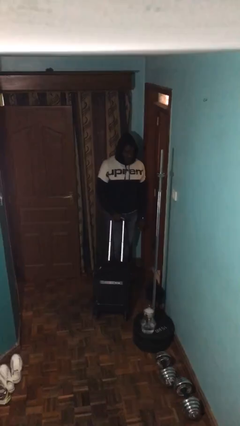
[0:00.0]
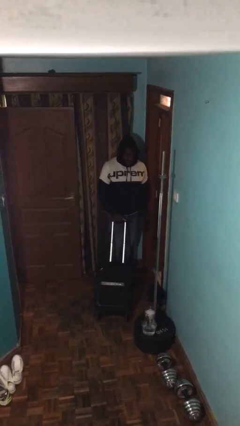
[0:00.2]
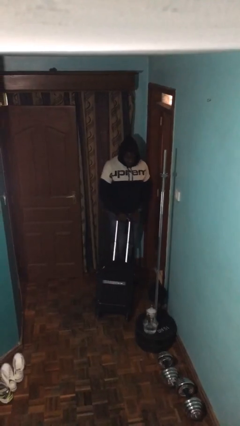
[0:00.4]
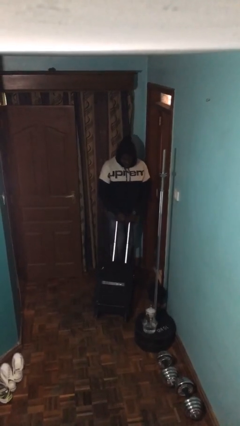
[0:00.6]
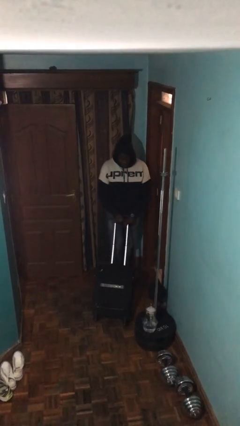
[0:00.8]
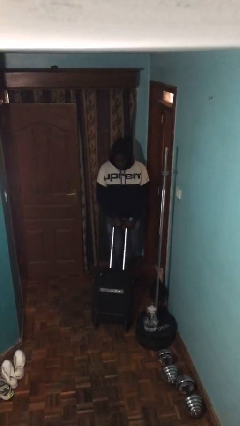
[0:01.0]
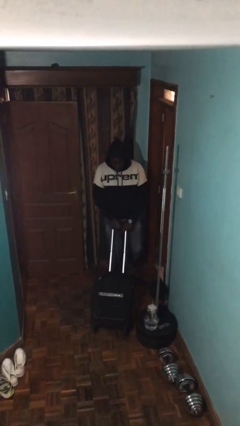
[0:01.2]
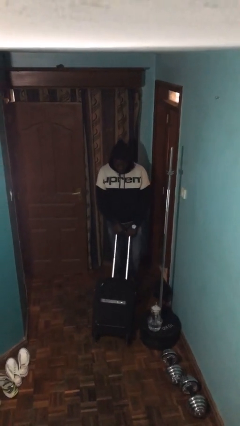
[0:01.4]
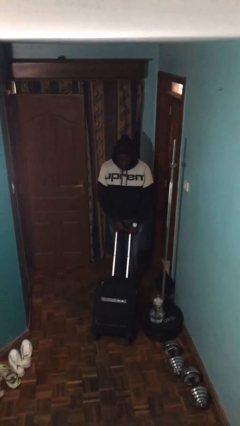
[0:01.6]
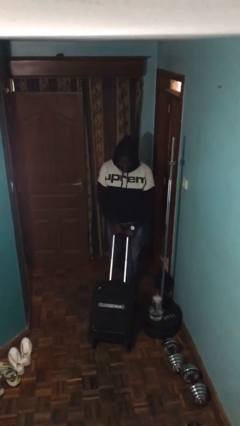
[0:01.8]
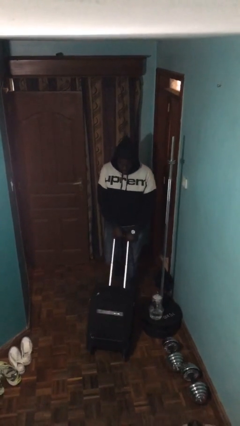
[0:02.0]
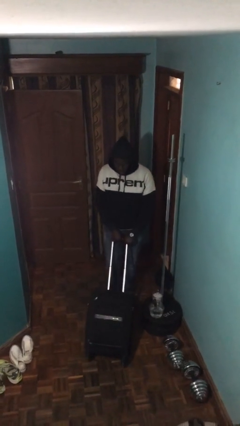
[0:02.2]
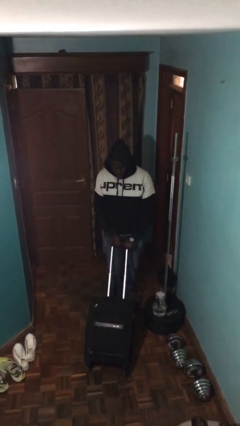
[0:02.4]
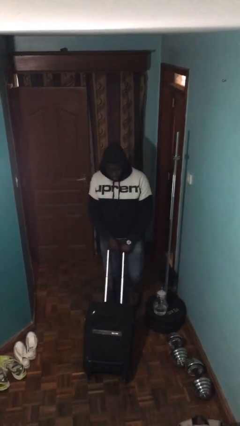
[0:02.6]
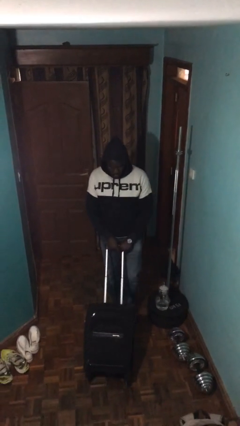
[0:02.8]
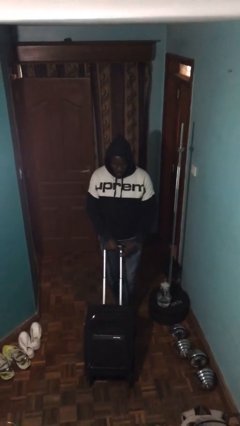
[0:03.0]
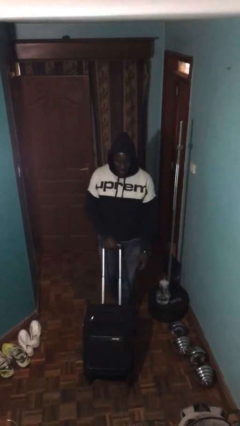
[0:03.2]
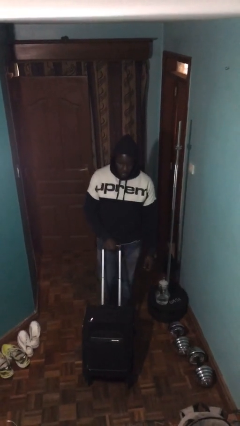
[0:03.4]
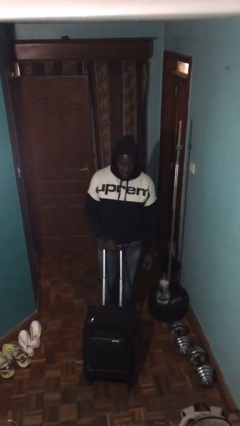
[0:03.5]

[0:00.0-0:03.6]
person pushes wheeled cart

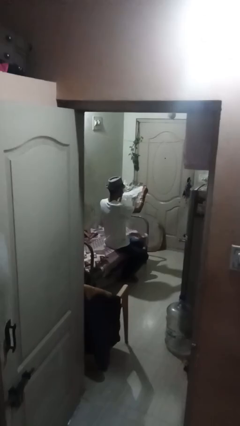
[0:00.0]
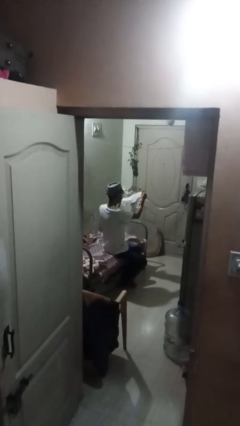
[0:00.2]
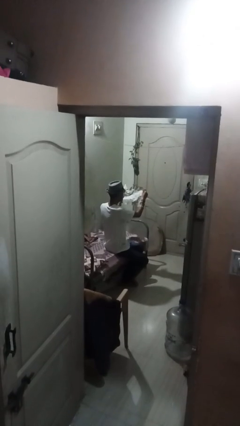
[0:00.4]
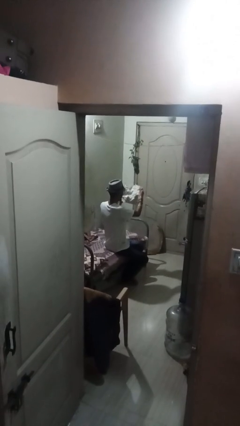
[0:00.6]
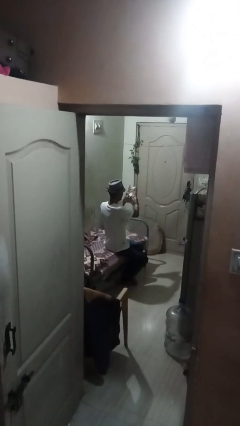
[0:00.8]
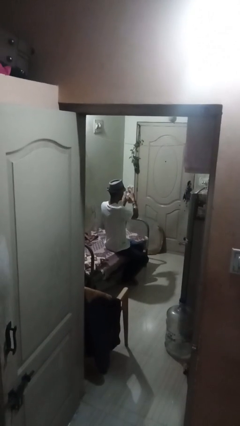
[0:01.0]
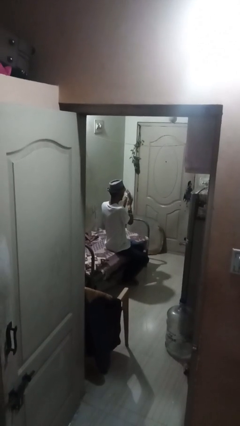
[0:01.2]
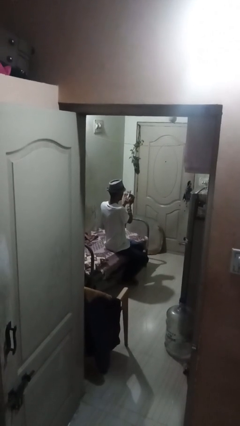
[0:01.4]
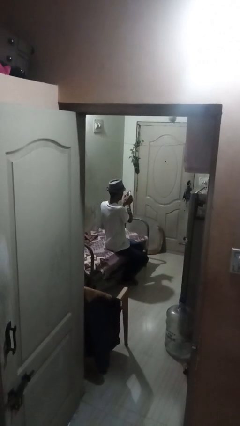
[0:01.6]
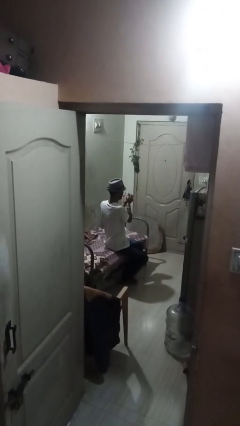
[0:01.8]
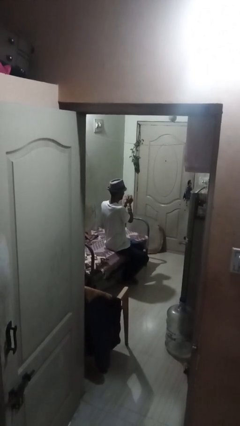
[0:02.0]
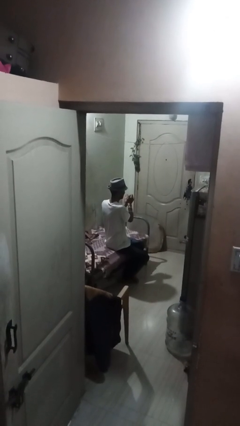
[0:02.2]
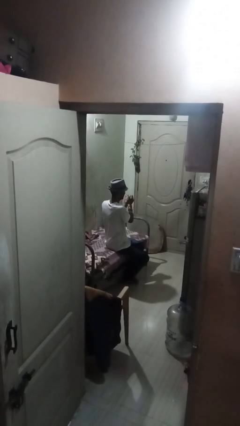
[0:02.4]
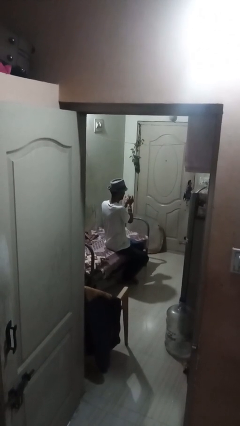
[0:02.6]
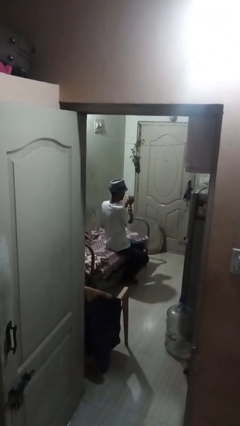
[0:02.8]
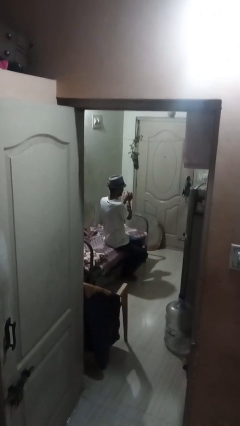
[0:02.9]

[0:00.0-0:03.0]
person crumples paper

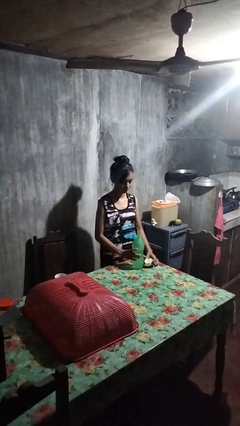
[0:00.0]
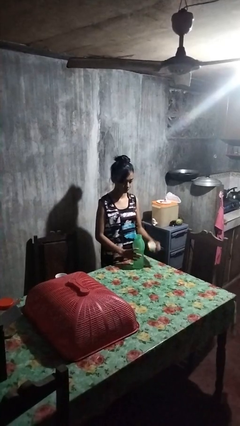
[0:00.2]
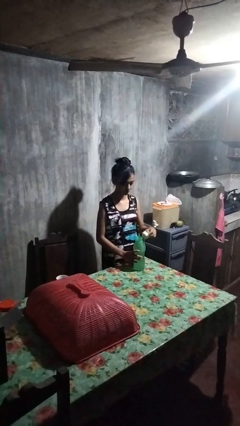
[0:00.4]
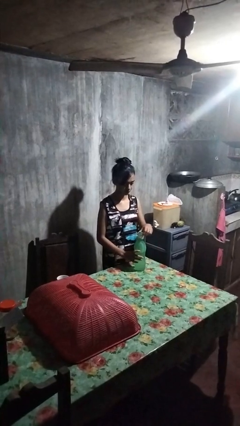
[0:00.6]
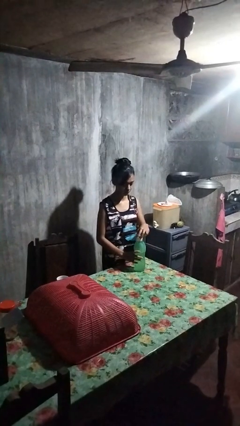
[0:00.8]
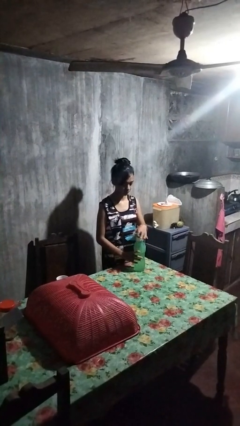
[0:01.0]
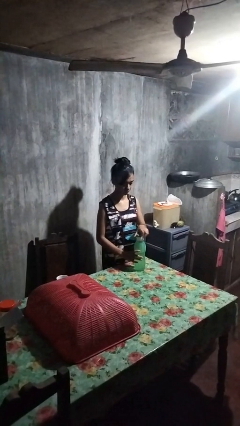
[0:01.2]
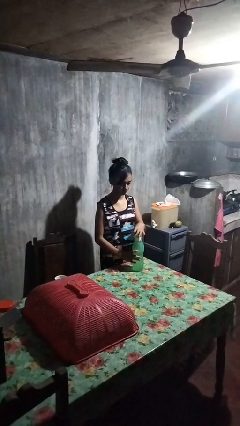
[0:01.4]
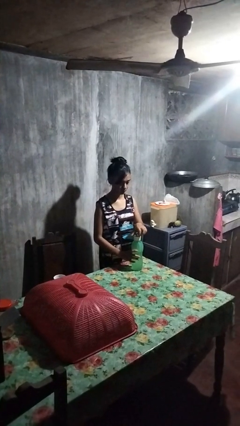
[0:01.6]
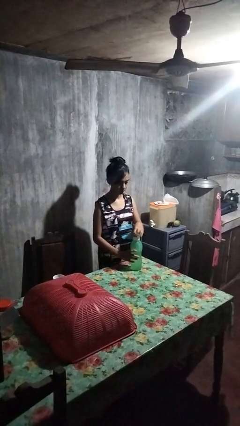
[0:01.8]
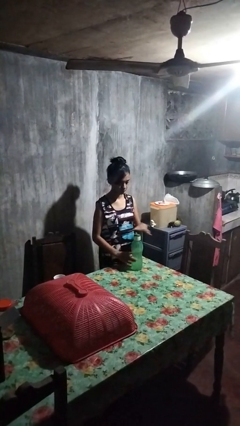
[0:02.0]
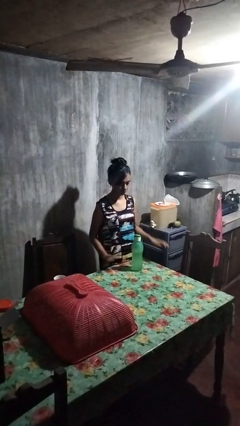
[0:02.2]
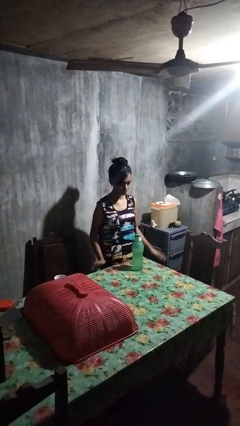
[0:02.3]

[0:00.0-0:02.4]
person screws lid to bottle

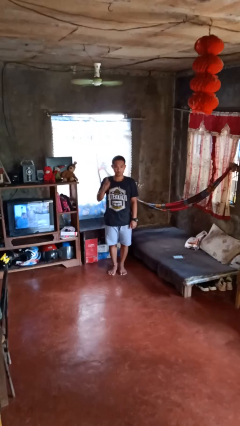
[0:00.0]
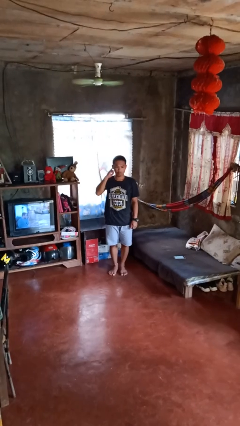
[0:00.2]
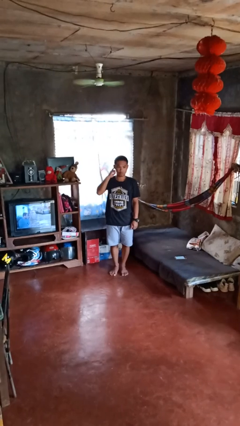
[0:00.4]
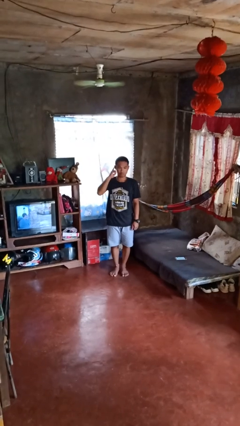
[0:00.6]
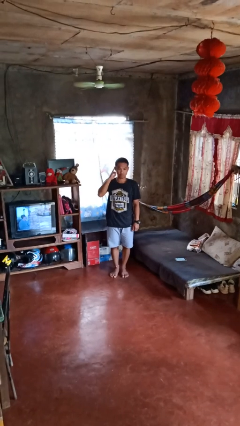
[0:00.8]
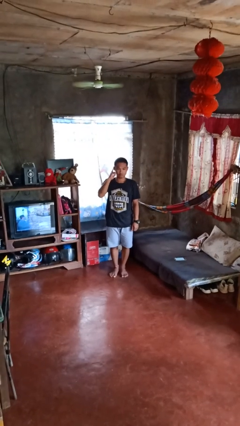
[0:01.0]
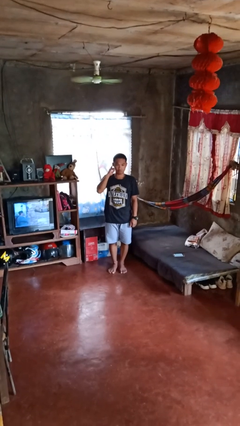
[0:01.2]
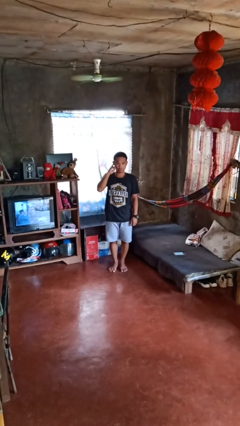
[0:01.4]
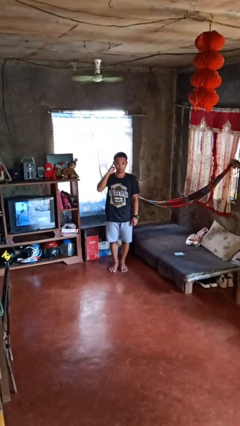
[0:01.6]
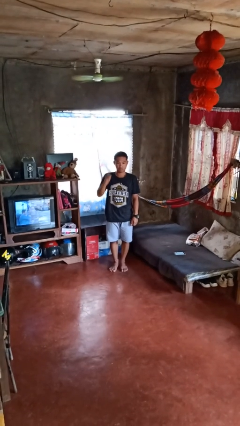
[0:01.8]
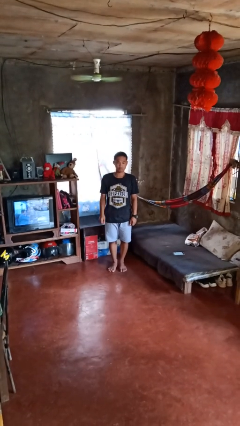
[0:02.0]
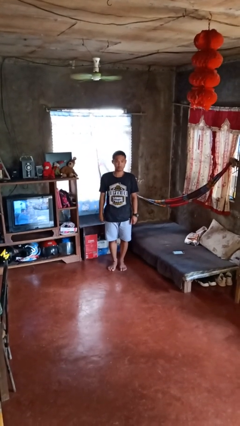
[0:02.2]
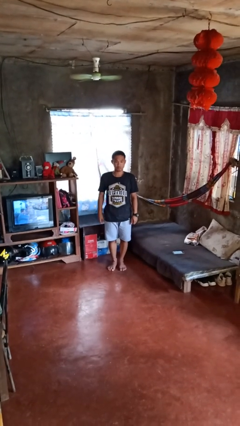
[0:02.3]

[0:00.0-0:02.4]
person gestures listen closely

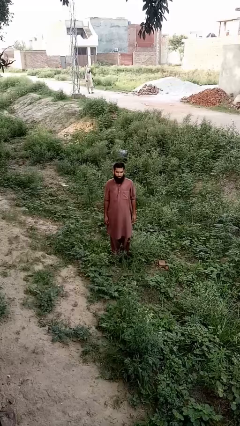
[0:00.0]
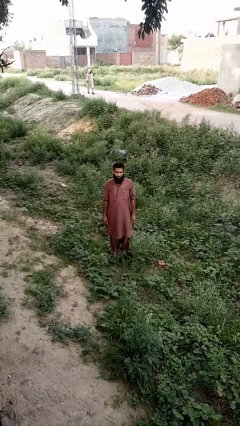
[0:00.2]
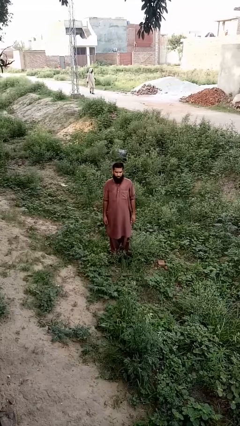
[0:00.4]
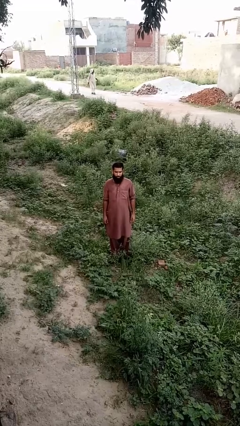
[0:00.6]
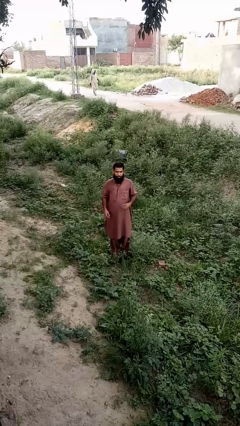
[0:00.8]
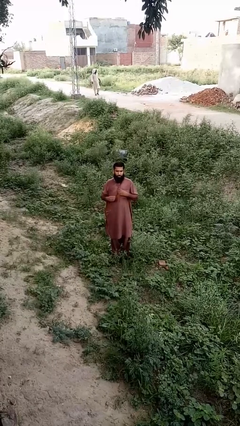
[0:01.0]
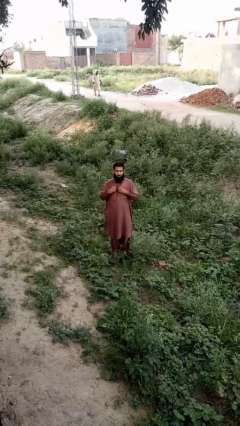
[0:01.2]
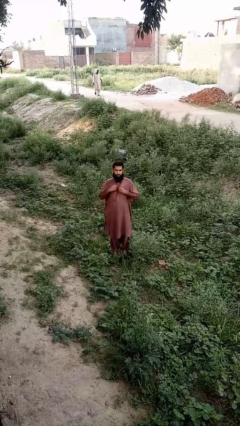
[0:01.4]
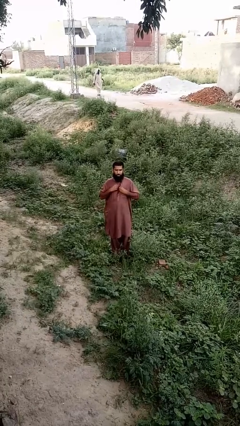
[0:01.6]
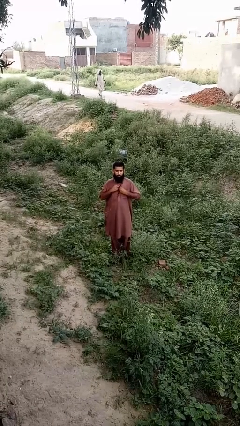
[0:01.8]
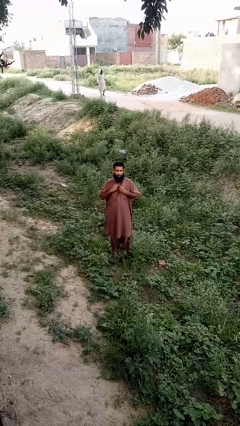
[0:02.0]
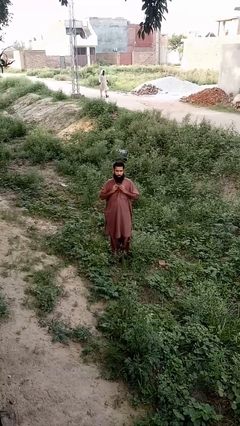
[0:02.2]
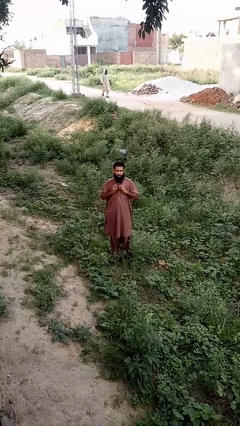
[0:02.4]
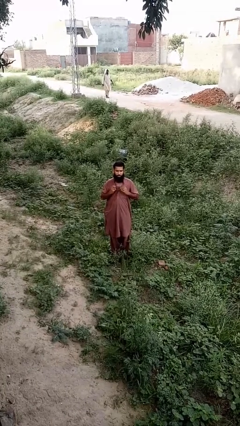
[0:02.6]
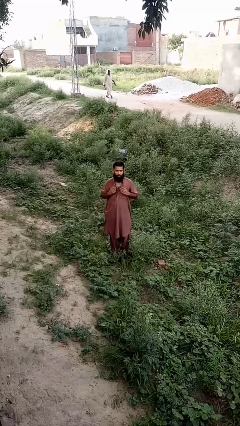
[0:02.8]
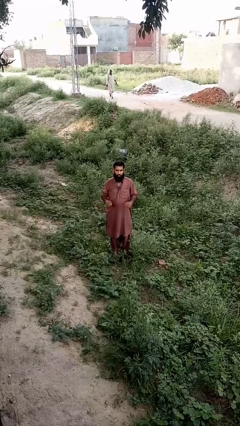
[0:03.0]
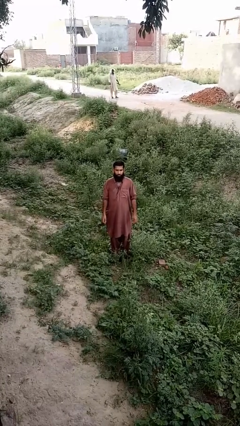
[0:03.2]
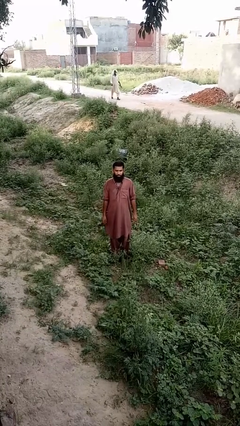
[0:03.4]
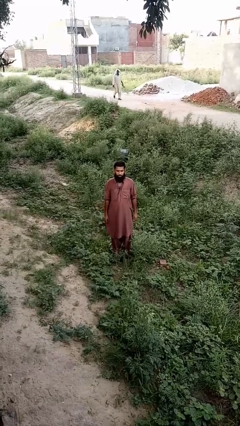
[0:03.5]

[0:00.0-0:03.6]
person unbuttons shirt

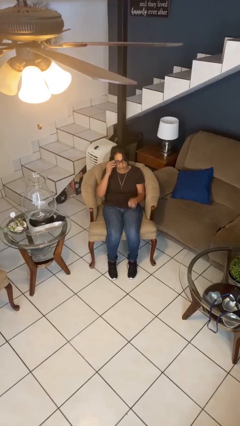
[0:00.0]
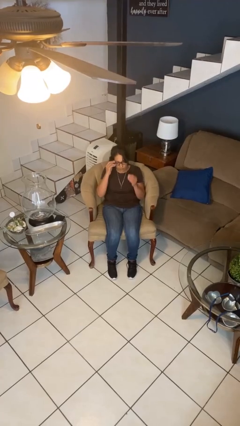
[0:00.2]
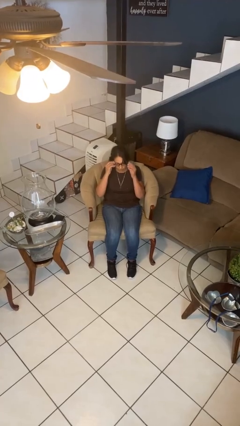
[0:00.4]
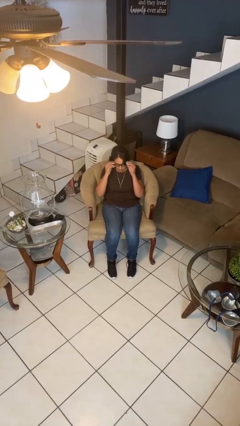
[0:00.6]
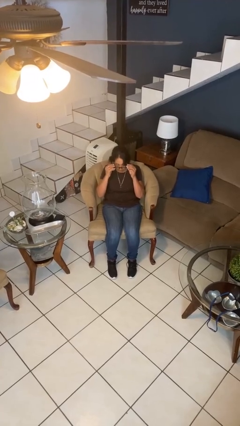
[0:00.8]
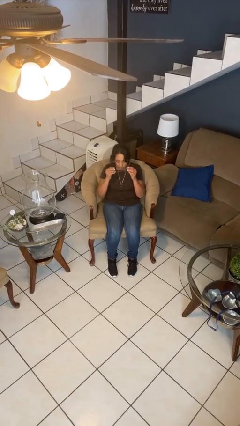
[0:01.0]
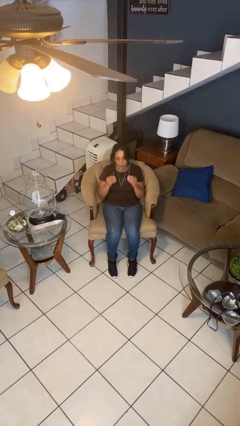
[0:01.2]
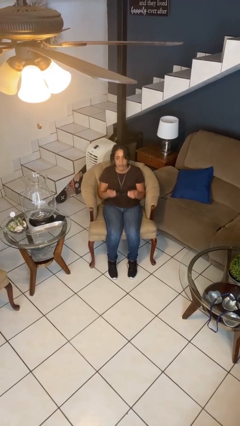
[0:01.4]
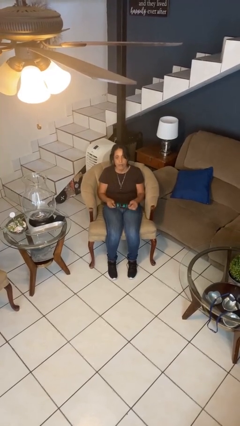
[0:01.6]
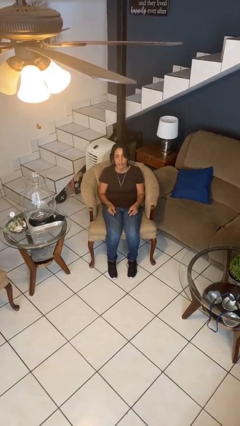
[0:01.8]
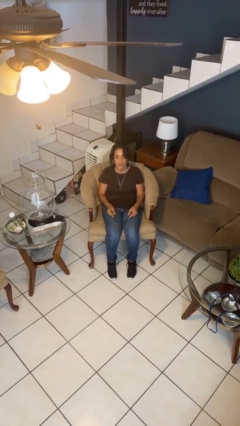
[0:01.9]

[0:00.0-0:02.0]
person takes off glasses
